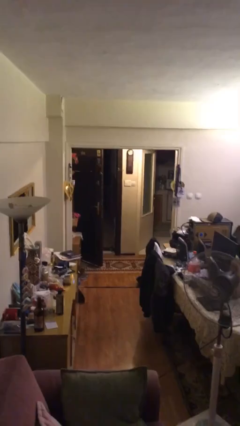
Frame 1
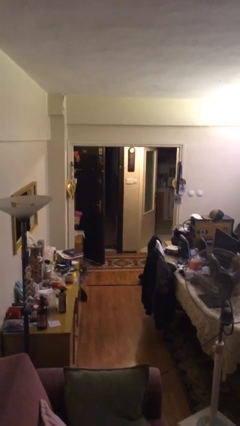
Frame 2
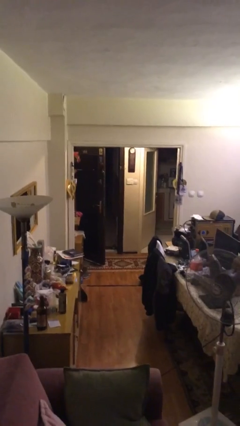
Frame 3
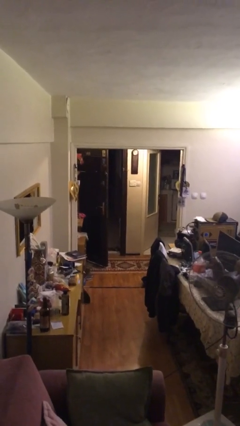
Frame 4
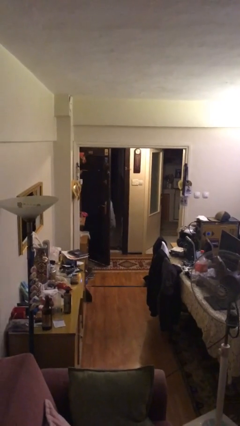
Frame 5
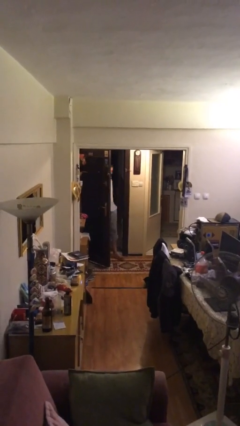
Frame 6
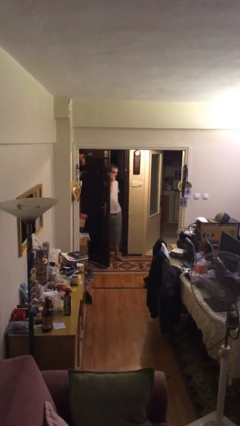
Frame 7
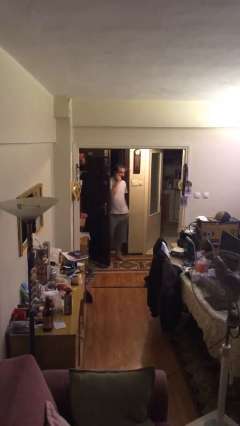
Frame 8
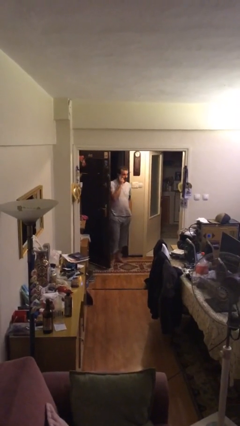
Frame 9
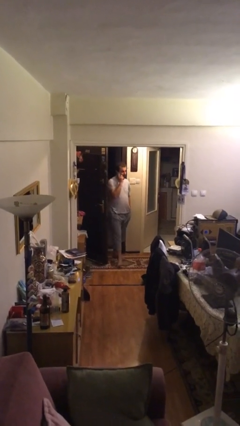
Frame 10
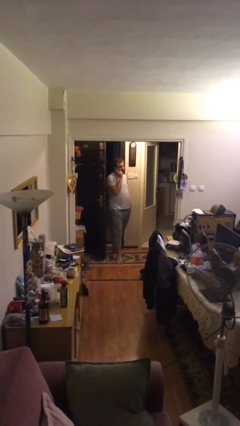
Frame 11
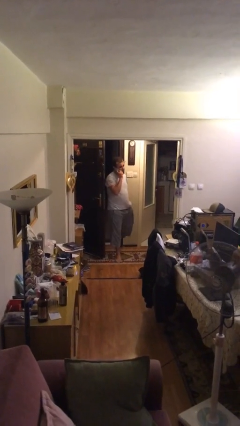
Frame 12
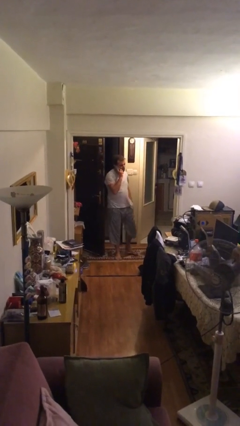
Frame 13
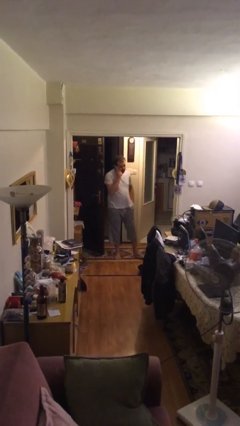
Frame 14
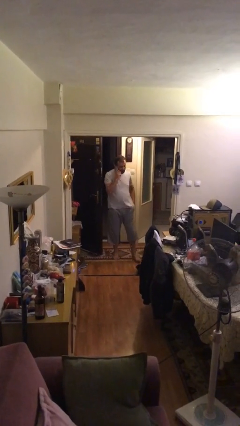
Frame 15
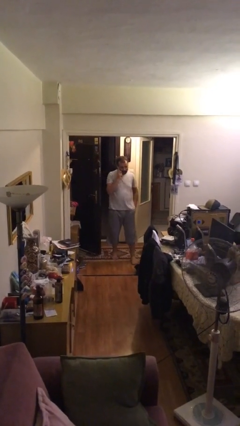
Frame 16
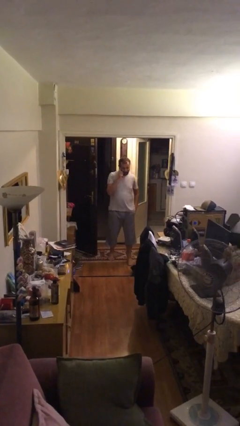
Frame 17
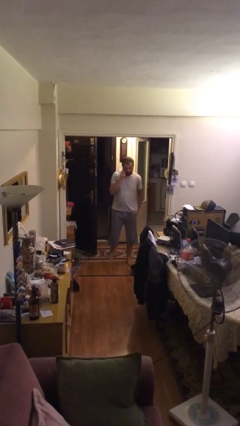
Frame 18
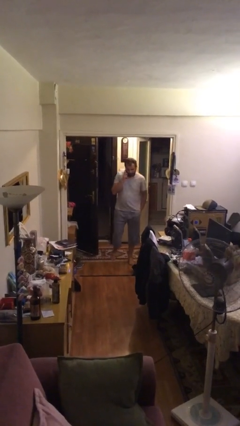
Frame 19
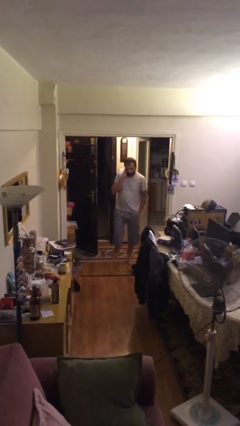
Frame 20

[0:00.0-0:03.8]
person enters scene through structure

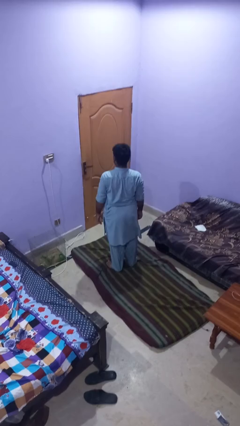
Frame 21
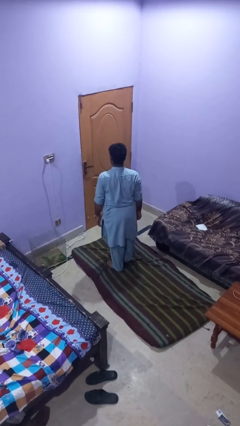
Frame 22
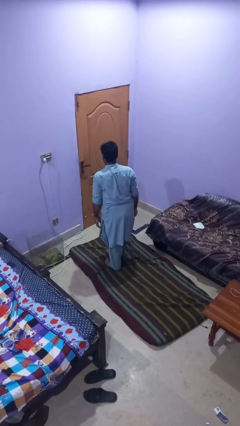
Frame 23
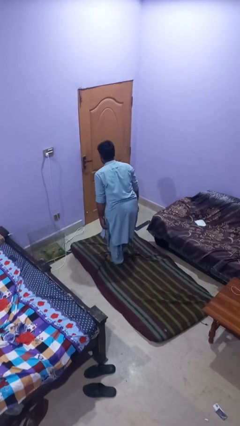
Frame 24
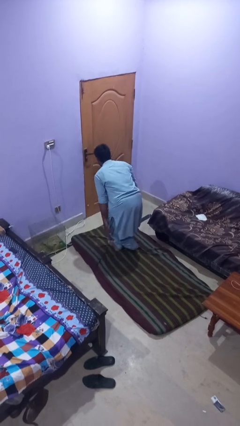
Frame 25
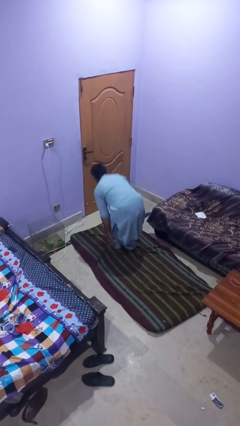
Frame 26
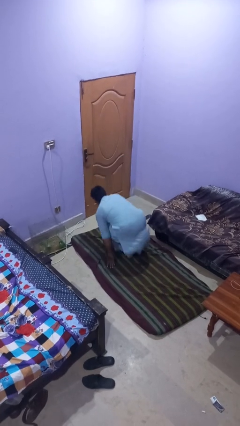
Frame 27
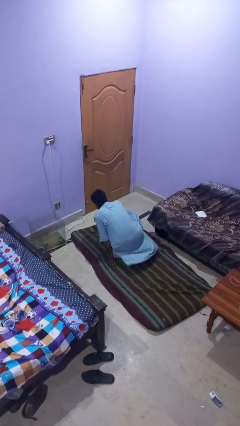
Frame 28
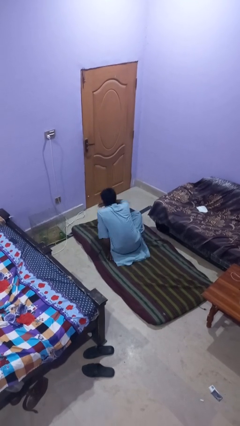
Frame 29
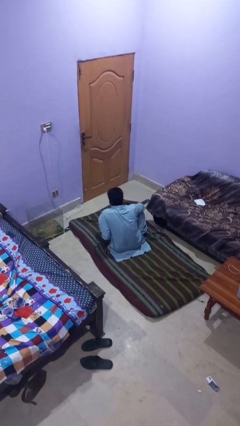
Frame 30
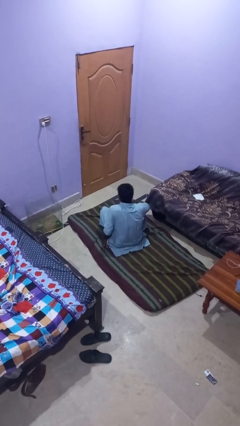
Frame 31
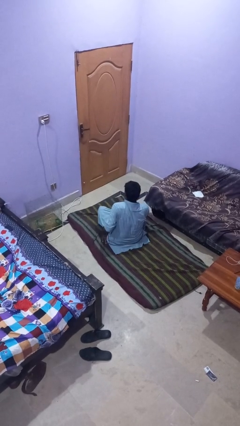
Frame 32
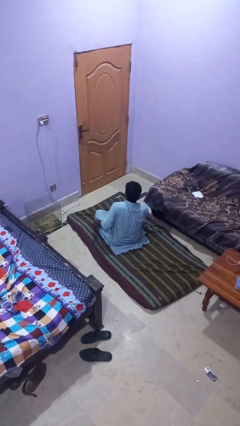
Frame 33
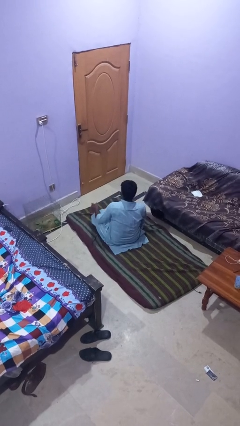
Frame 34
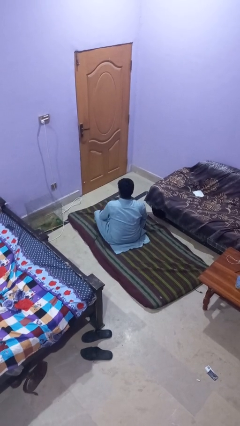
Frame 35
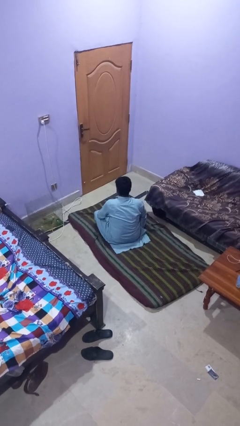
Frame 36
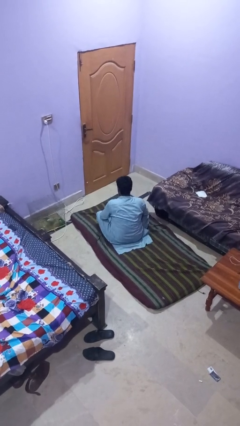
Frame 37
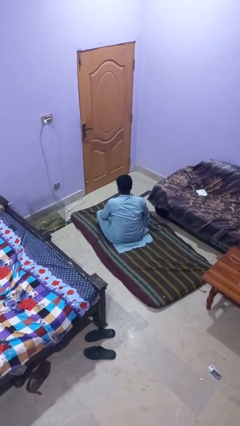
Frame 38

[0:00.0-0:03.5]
person sits crisscross

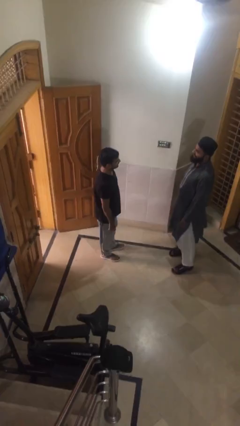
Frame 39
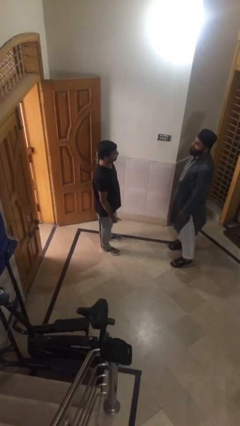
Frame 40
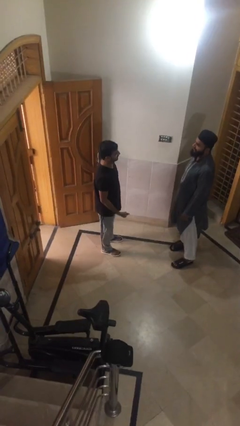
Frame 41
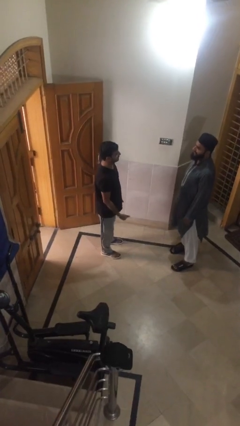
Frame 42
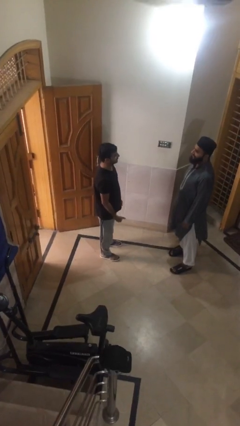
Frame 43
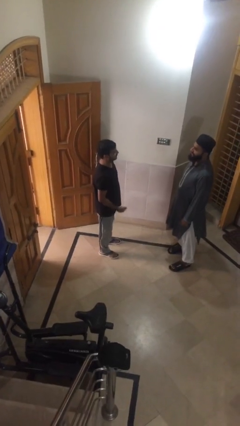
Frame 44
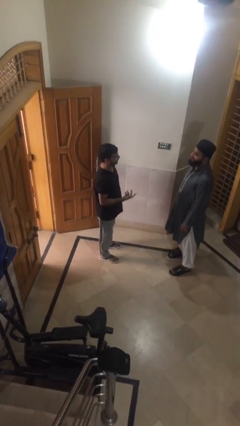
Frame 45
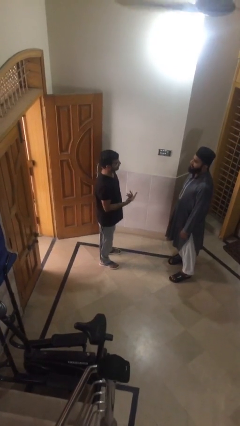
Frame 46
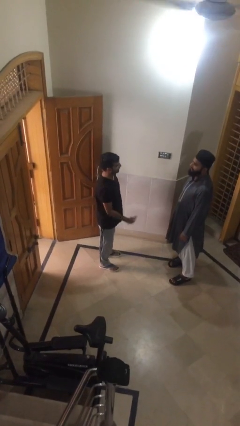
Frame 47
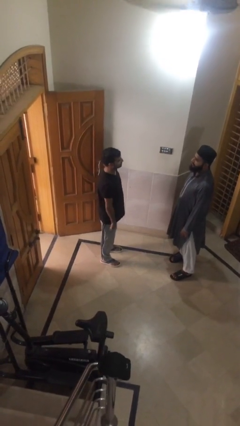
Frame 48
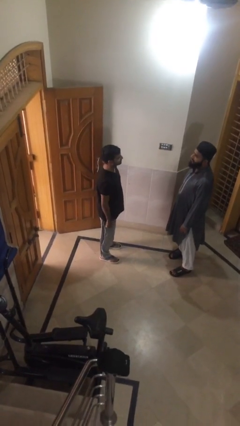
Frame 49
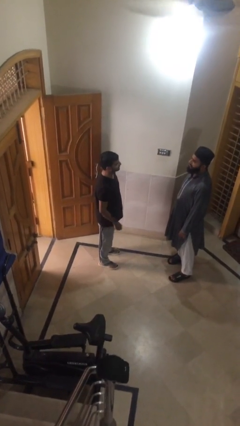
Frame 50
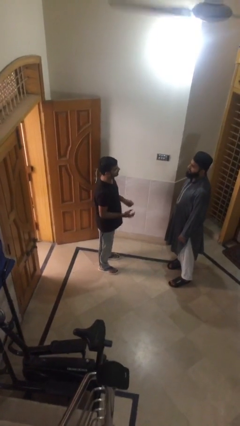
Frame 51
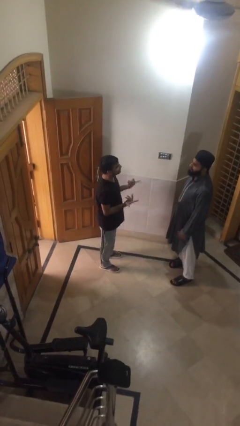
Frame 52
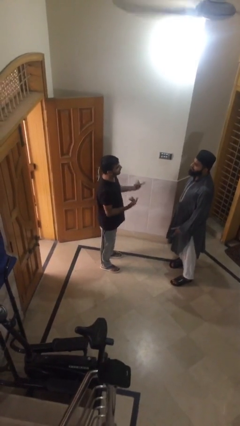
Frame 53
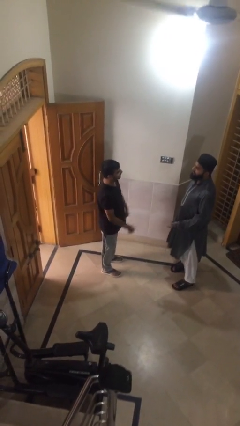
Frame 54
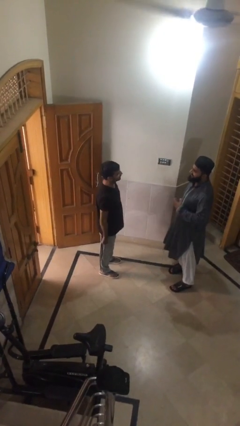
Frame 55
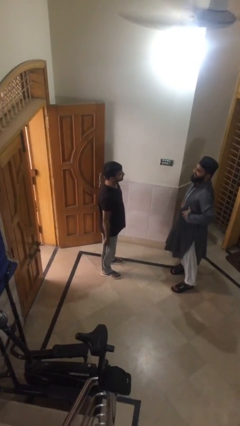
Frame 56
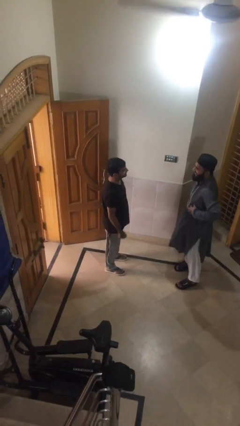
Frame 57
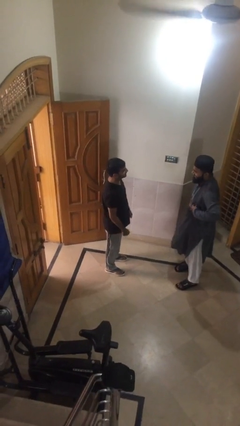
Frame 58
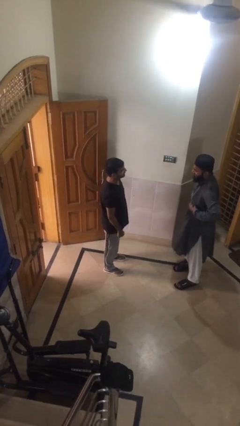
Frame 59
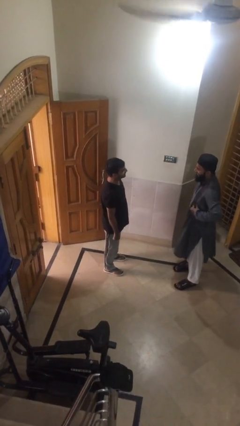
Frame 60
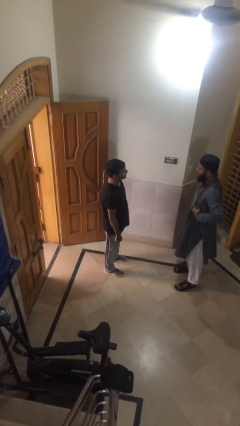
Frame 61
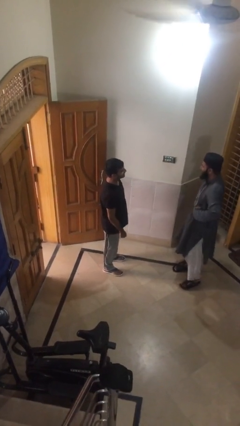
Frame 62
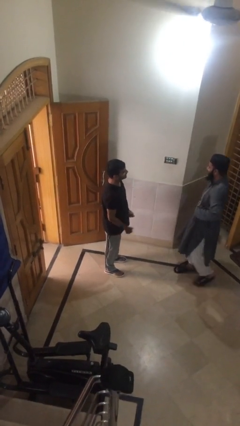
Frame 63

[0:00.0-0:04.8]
person talks to person

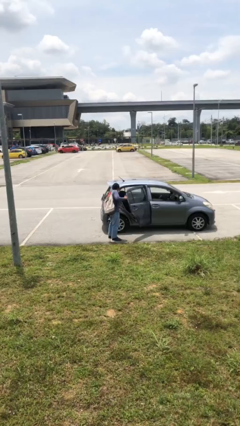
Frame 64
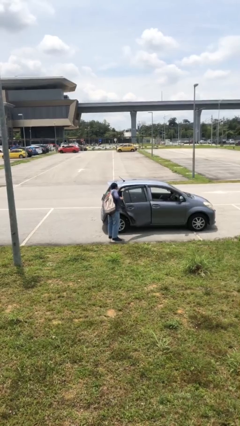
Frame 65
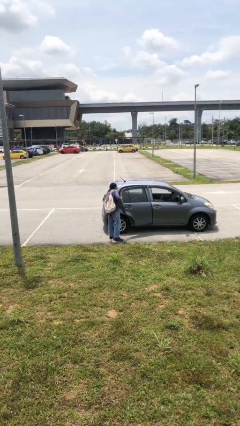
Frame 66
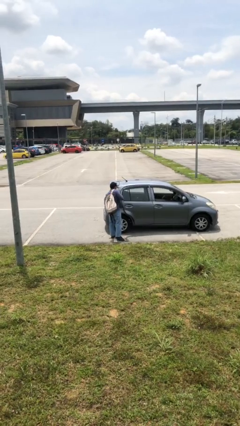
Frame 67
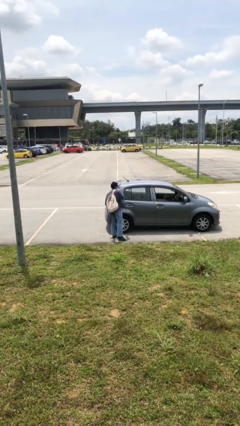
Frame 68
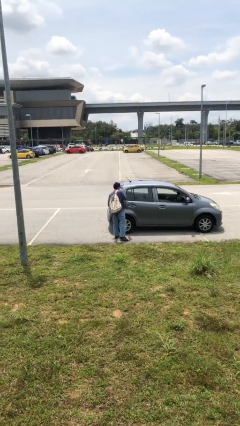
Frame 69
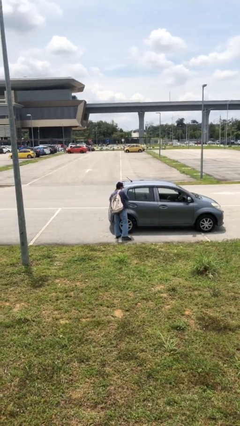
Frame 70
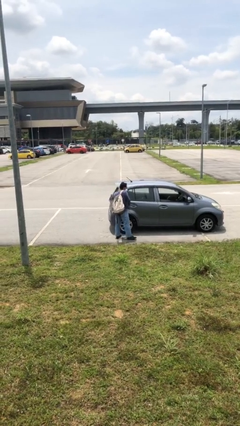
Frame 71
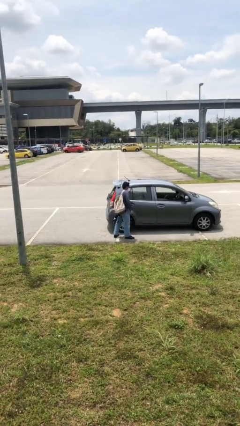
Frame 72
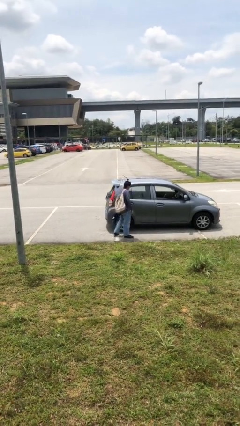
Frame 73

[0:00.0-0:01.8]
person closes car door

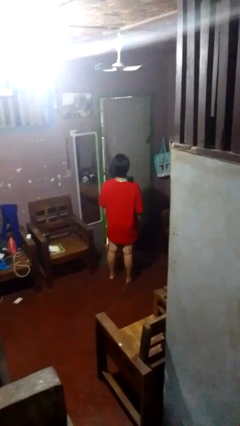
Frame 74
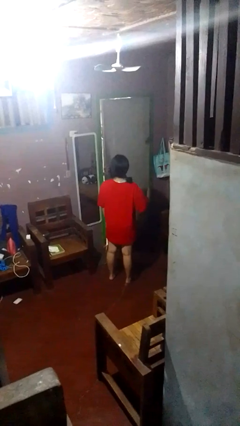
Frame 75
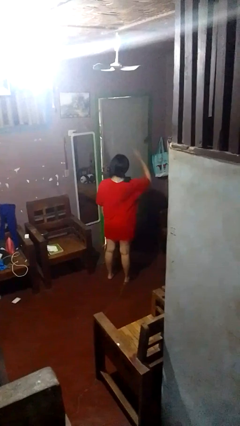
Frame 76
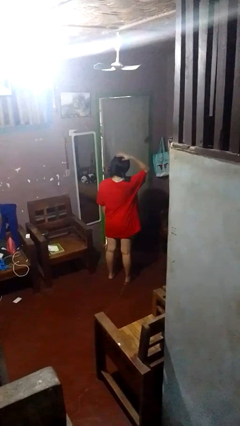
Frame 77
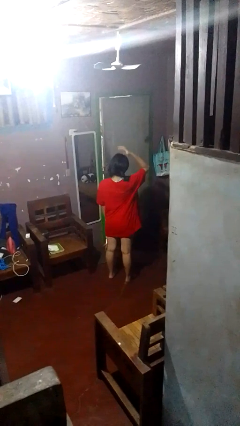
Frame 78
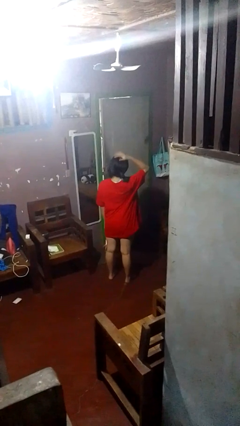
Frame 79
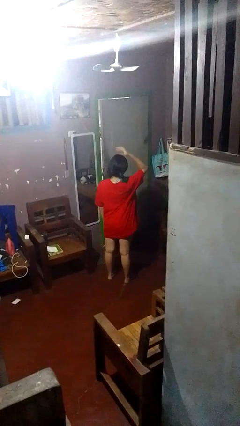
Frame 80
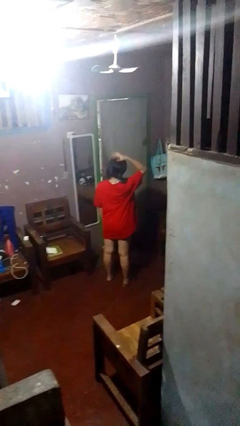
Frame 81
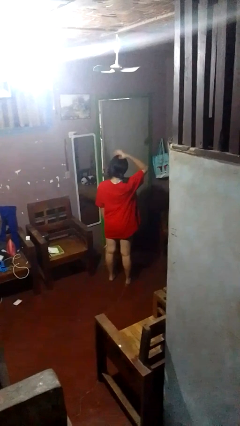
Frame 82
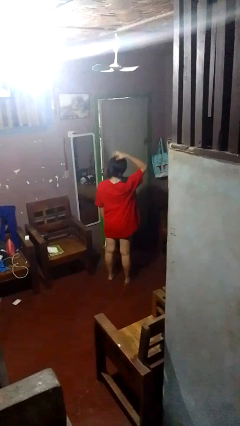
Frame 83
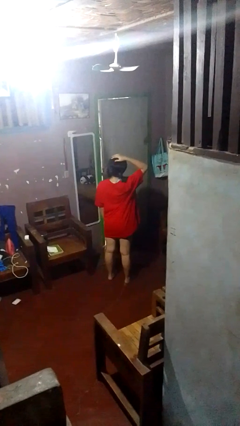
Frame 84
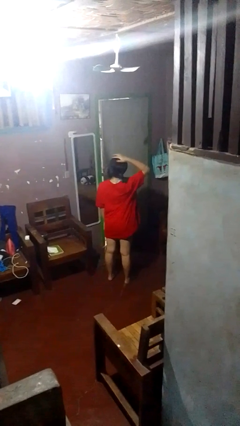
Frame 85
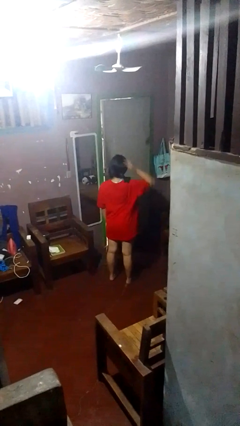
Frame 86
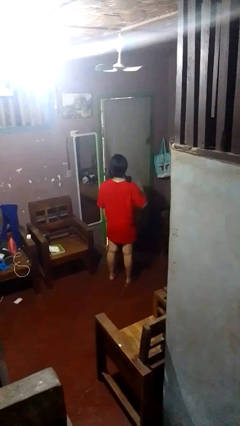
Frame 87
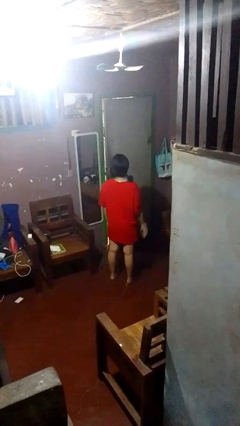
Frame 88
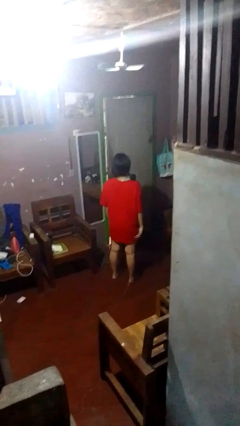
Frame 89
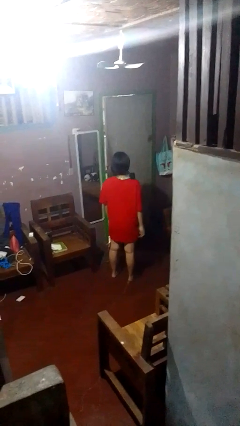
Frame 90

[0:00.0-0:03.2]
person pats head

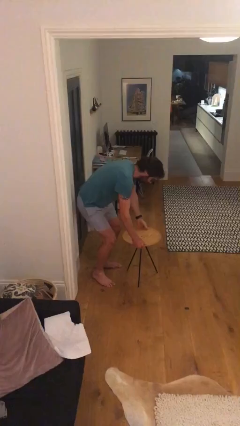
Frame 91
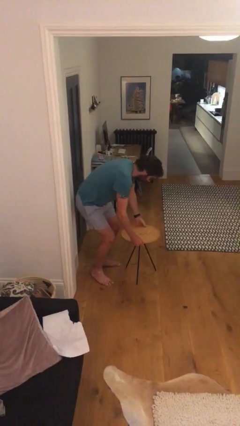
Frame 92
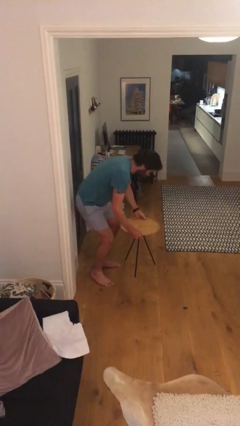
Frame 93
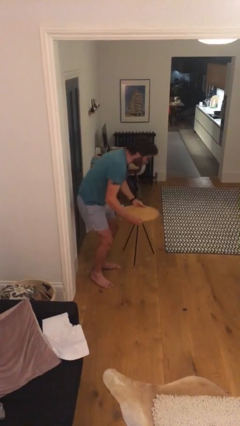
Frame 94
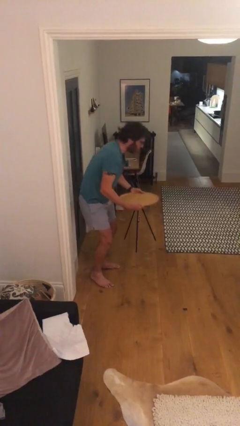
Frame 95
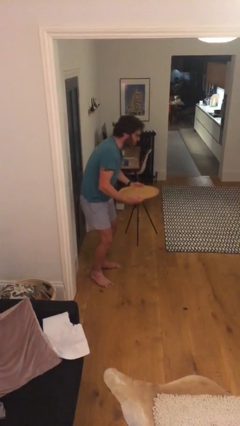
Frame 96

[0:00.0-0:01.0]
person picks up object from floor
